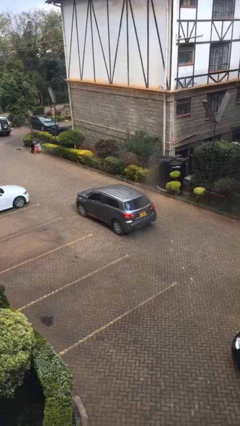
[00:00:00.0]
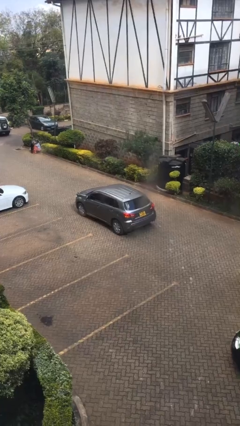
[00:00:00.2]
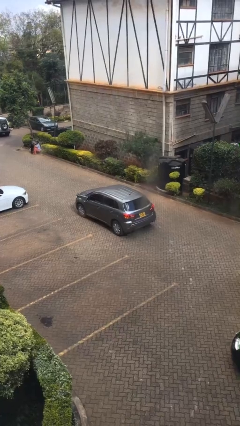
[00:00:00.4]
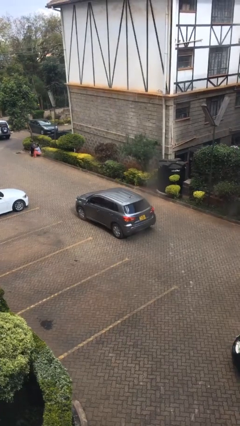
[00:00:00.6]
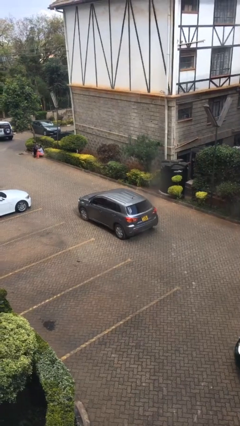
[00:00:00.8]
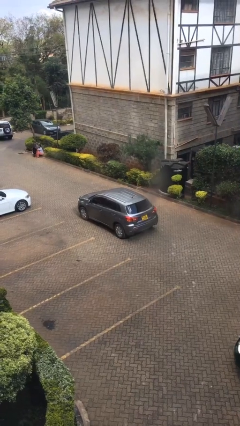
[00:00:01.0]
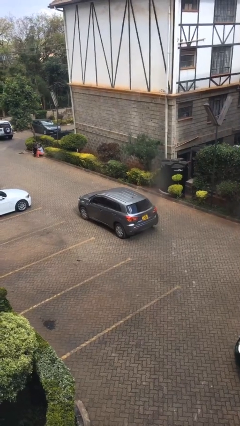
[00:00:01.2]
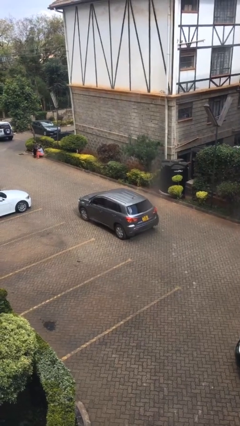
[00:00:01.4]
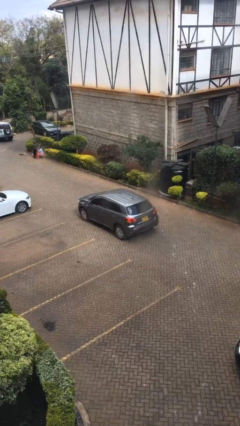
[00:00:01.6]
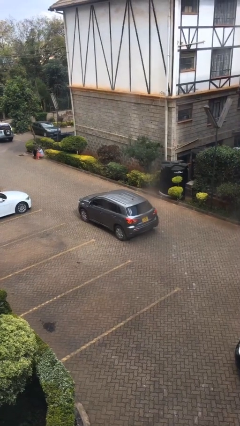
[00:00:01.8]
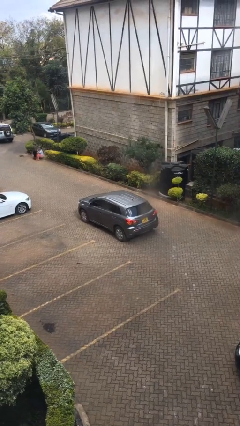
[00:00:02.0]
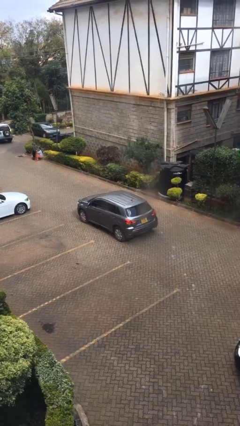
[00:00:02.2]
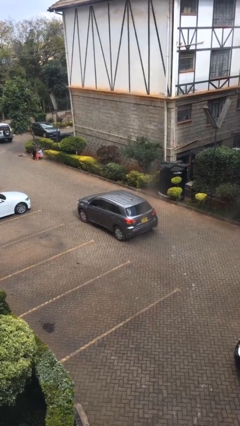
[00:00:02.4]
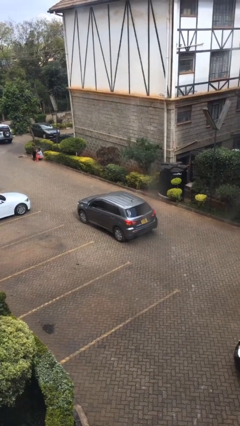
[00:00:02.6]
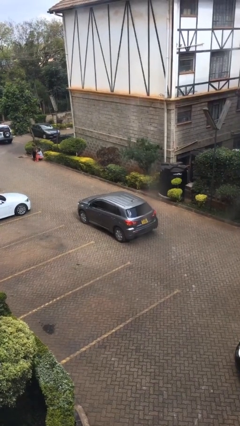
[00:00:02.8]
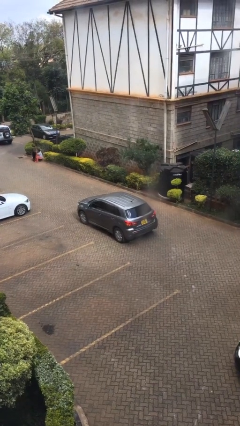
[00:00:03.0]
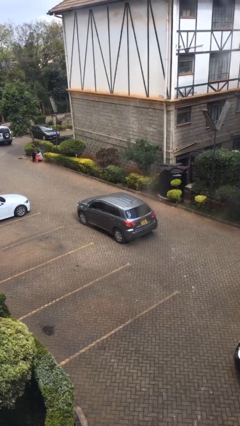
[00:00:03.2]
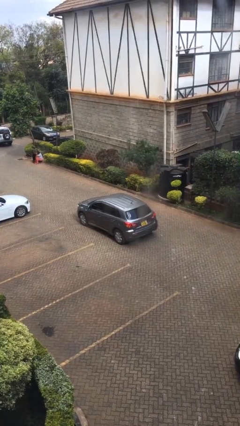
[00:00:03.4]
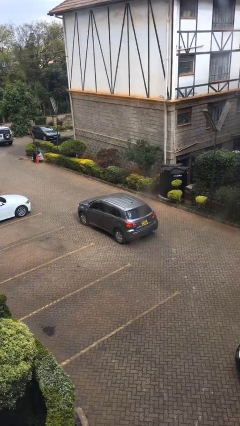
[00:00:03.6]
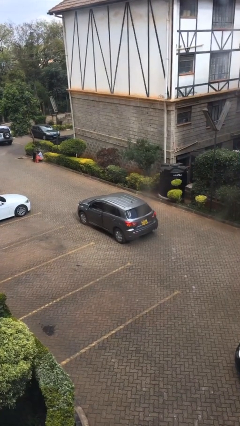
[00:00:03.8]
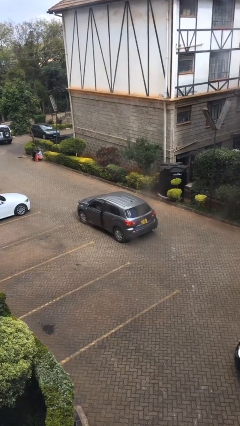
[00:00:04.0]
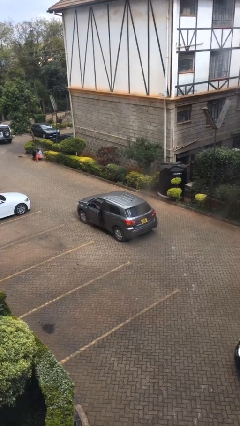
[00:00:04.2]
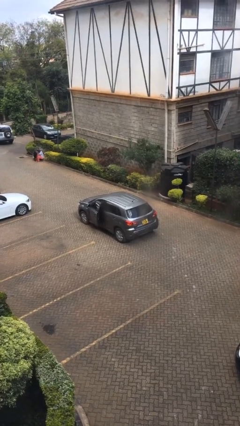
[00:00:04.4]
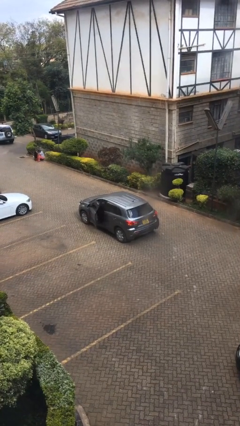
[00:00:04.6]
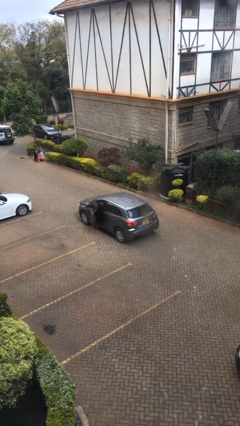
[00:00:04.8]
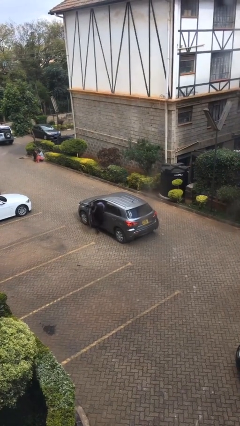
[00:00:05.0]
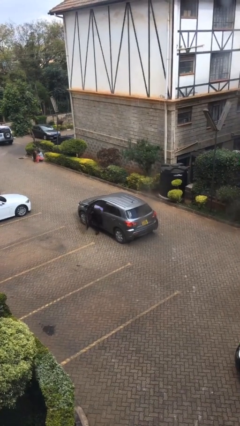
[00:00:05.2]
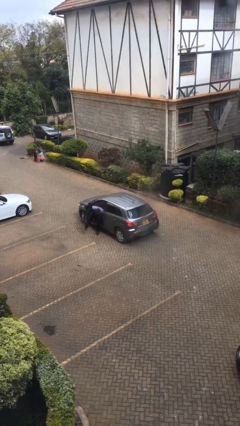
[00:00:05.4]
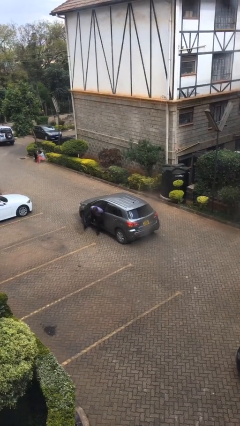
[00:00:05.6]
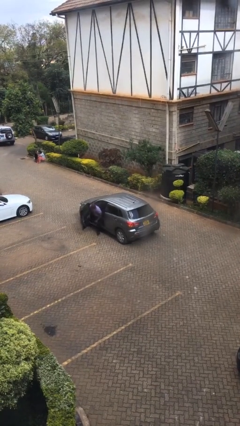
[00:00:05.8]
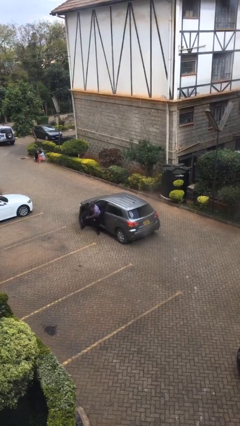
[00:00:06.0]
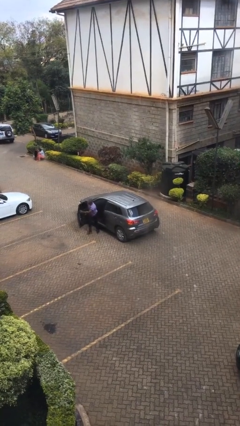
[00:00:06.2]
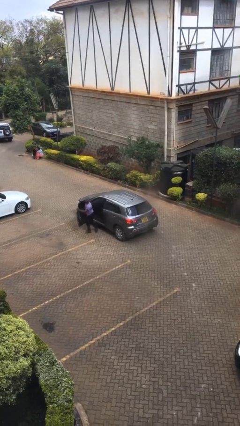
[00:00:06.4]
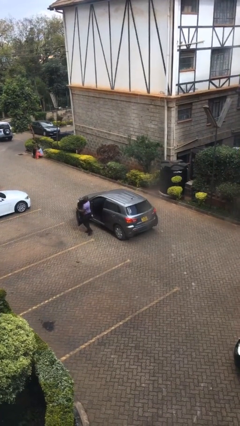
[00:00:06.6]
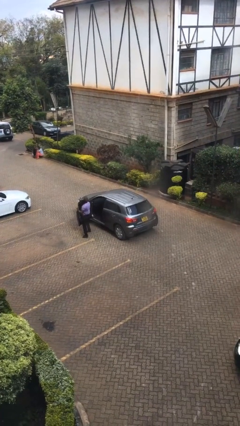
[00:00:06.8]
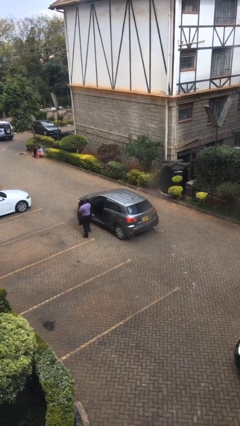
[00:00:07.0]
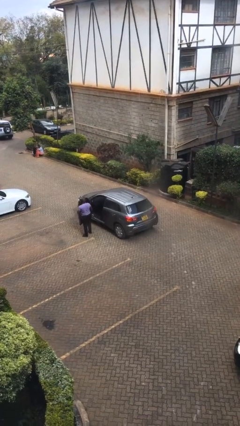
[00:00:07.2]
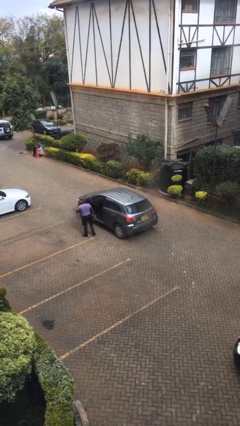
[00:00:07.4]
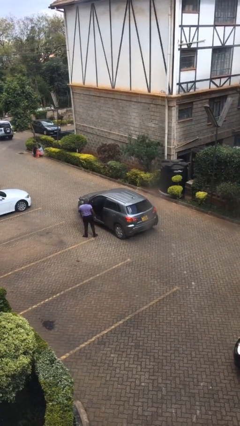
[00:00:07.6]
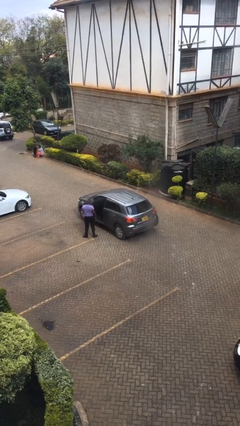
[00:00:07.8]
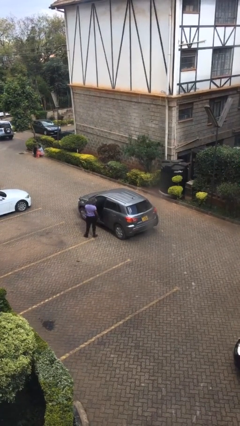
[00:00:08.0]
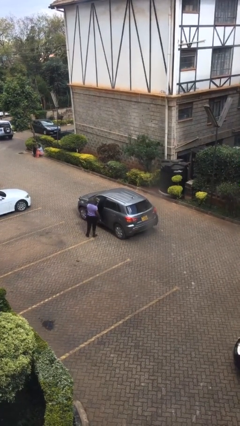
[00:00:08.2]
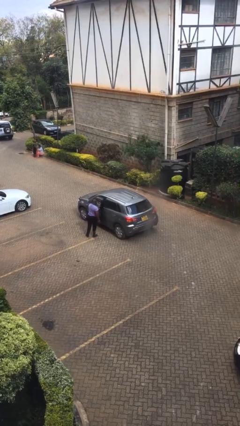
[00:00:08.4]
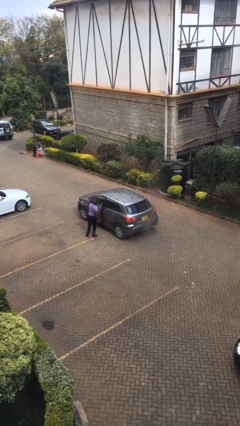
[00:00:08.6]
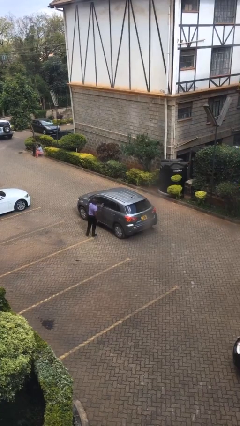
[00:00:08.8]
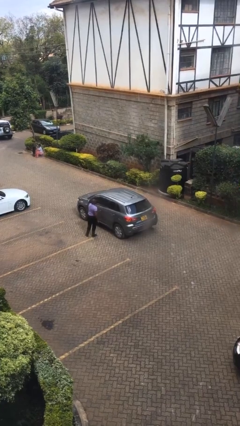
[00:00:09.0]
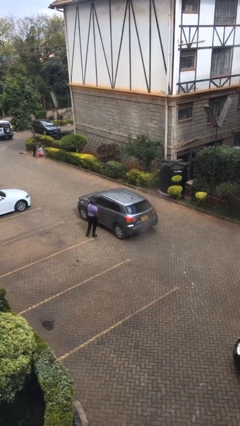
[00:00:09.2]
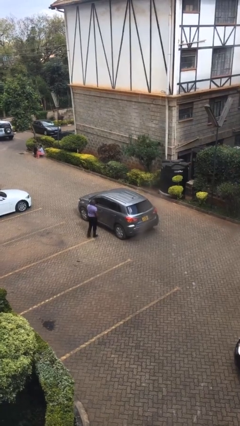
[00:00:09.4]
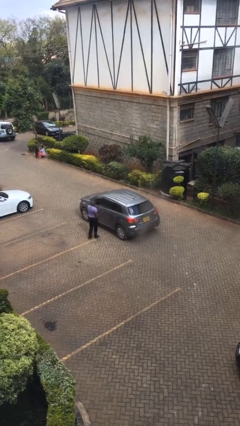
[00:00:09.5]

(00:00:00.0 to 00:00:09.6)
car drops off person

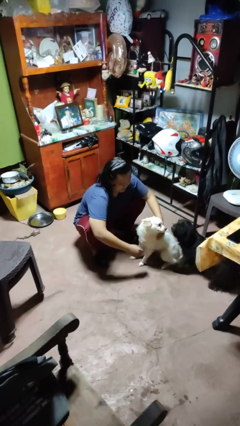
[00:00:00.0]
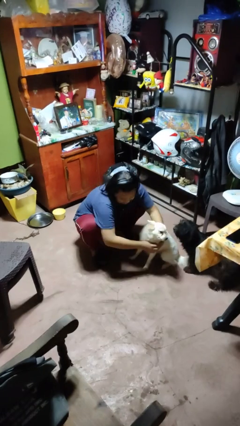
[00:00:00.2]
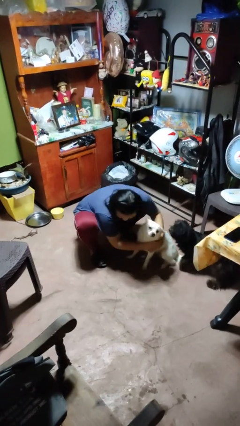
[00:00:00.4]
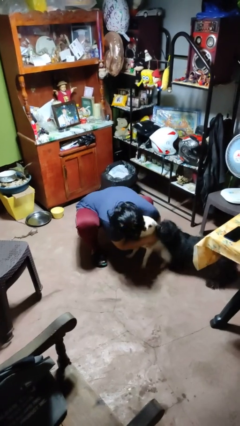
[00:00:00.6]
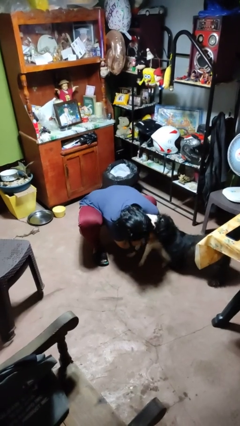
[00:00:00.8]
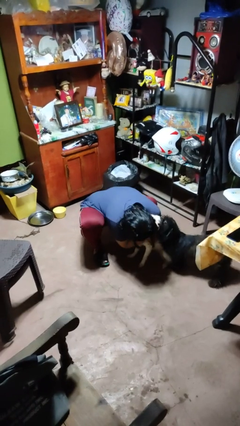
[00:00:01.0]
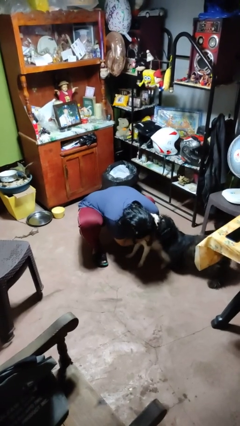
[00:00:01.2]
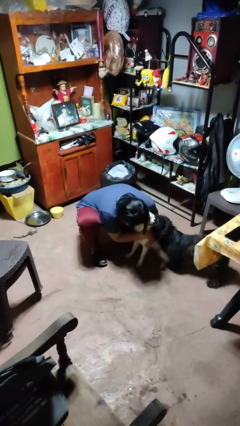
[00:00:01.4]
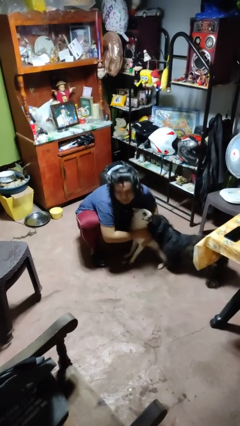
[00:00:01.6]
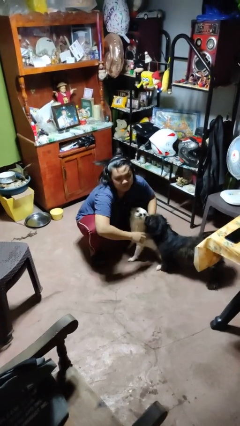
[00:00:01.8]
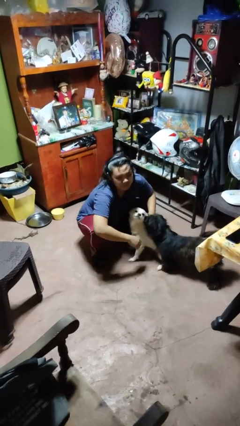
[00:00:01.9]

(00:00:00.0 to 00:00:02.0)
person hugs dog

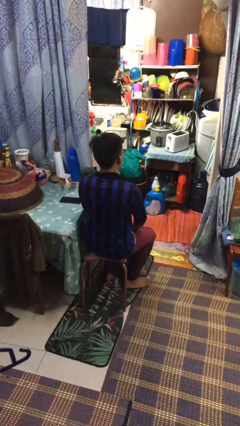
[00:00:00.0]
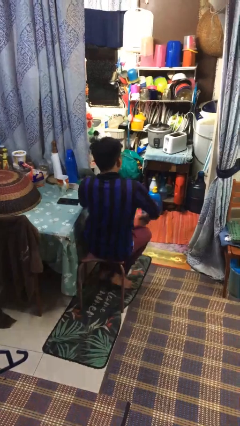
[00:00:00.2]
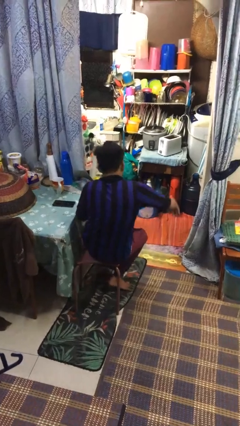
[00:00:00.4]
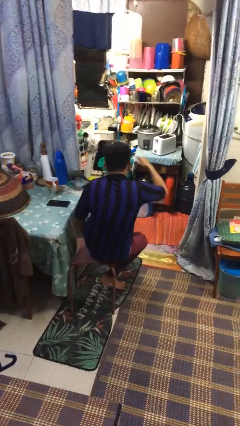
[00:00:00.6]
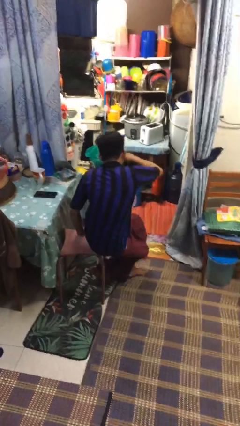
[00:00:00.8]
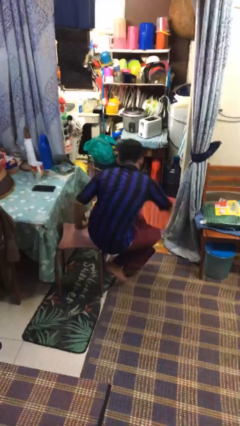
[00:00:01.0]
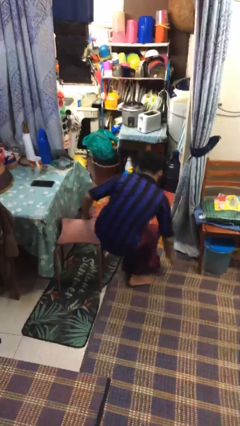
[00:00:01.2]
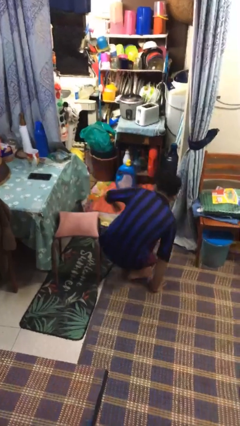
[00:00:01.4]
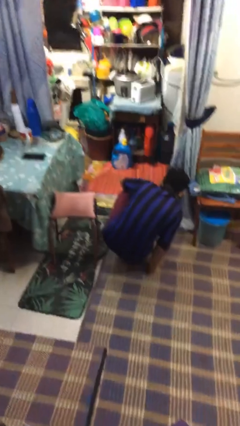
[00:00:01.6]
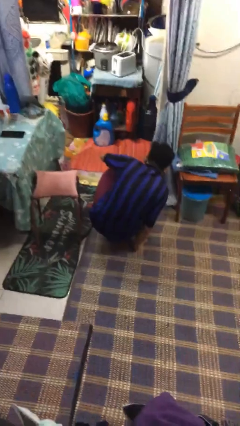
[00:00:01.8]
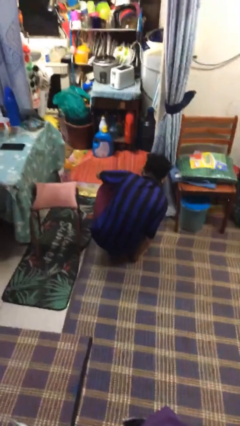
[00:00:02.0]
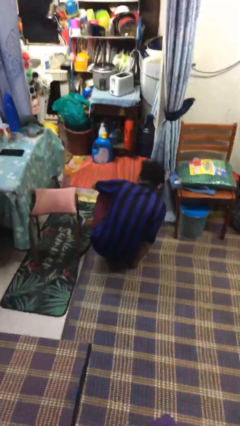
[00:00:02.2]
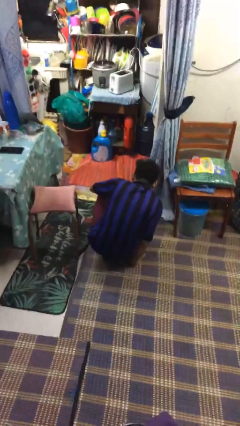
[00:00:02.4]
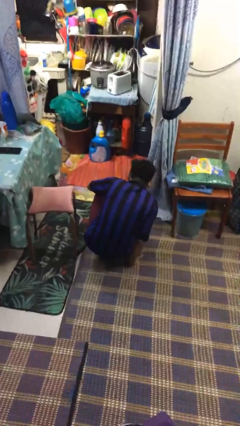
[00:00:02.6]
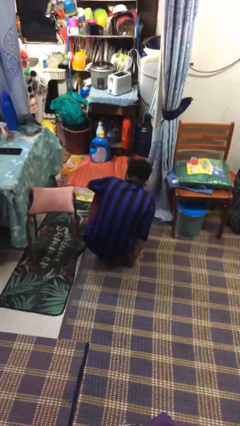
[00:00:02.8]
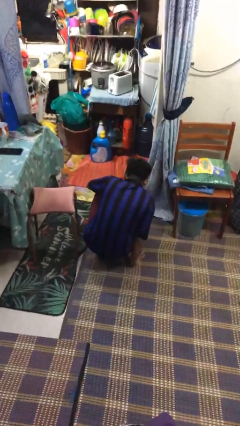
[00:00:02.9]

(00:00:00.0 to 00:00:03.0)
person falls from chair

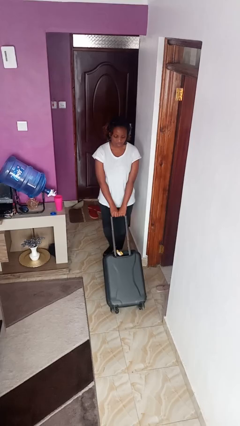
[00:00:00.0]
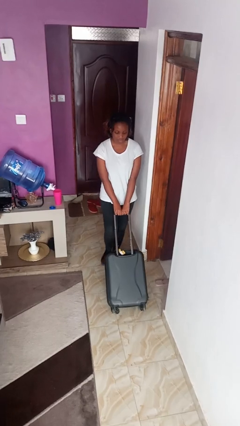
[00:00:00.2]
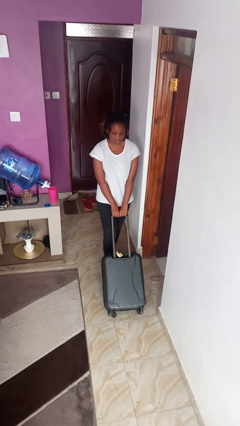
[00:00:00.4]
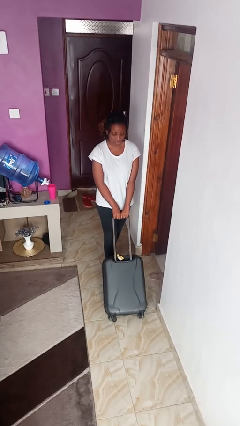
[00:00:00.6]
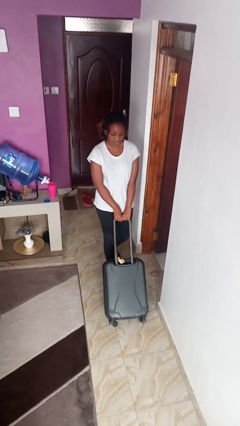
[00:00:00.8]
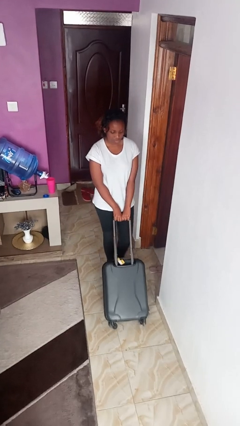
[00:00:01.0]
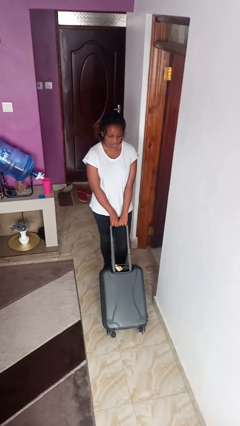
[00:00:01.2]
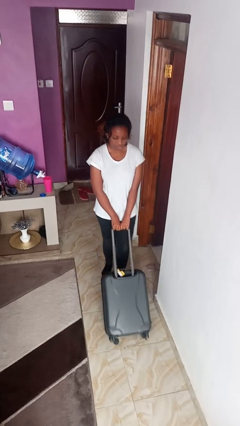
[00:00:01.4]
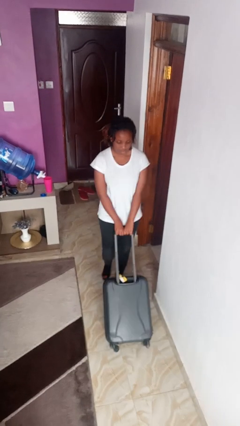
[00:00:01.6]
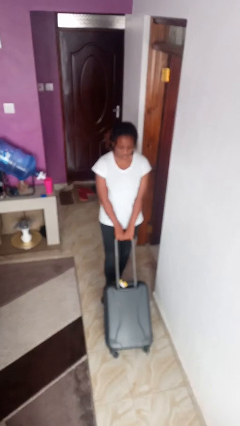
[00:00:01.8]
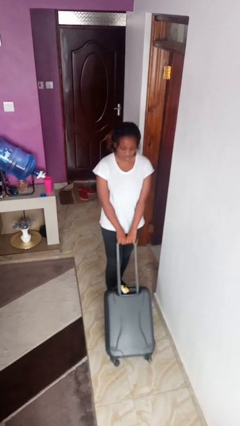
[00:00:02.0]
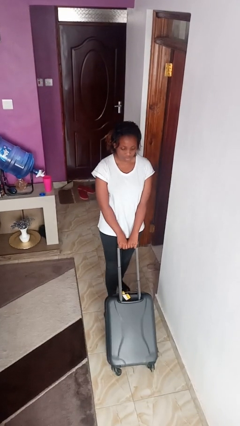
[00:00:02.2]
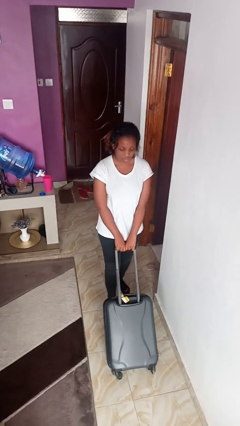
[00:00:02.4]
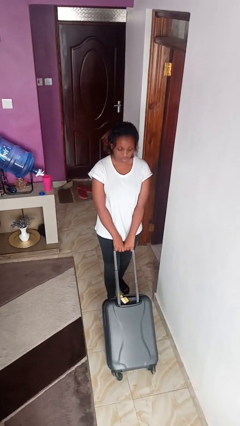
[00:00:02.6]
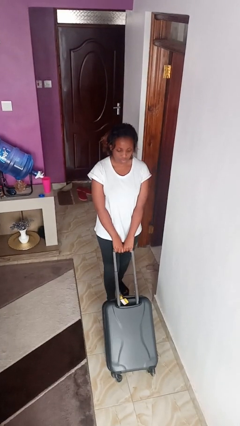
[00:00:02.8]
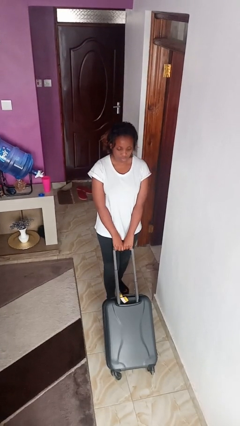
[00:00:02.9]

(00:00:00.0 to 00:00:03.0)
person pushes wheeled cart
